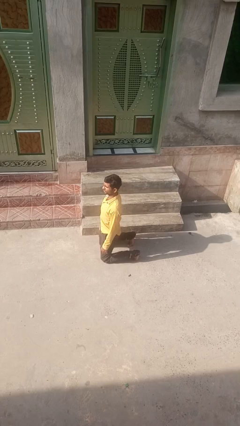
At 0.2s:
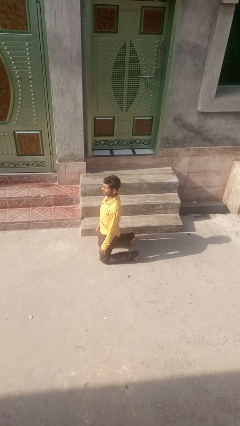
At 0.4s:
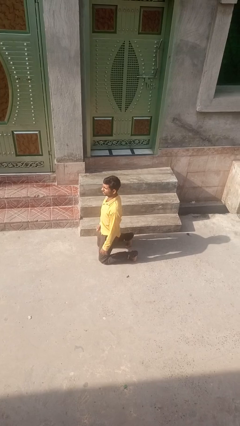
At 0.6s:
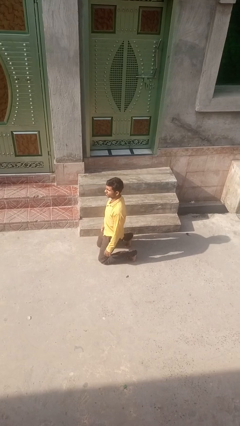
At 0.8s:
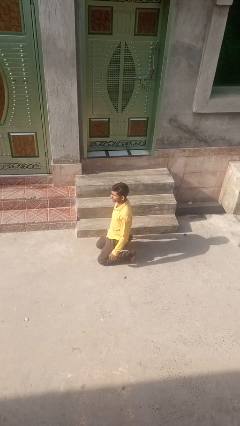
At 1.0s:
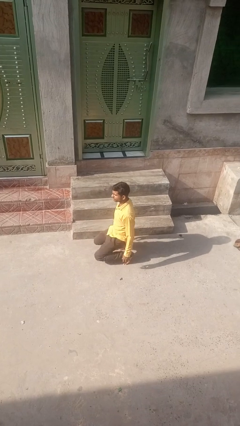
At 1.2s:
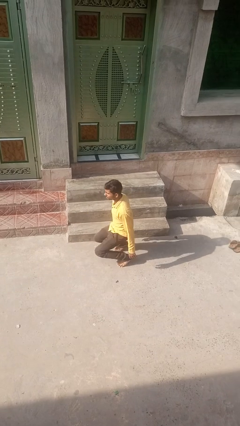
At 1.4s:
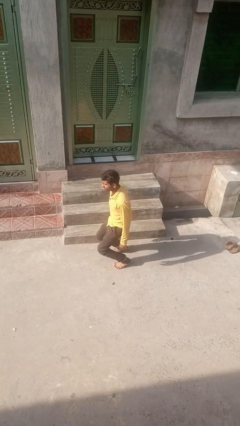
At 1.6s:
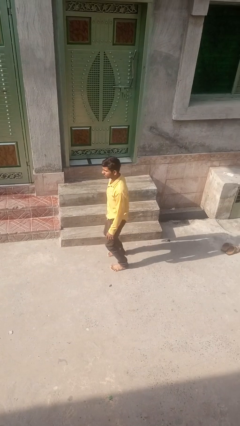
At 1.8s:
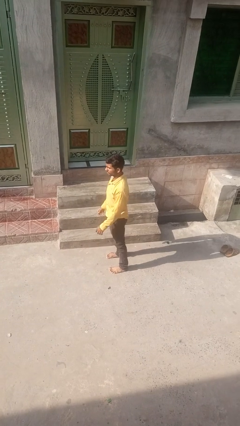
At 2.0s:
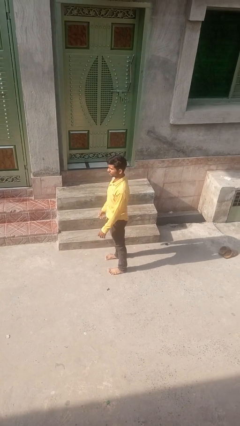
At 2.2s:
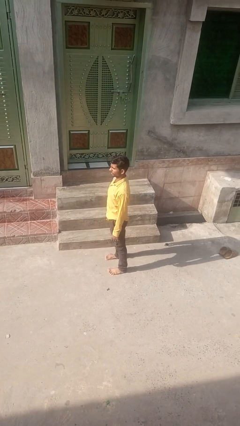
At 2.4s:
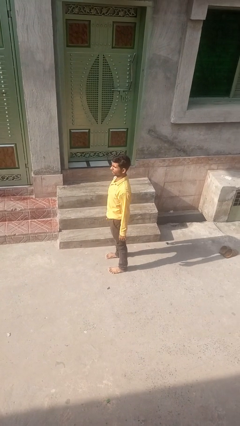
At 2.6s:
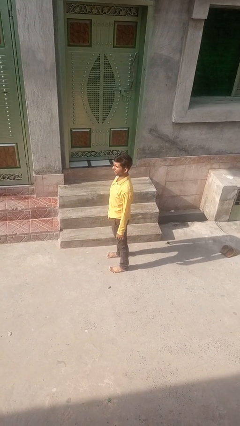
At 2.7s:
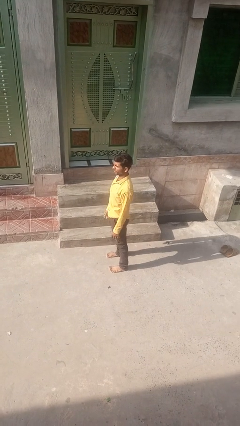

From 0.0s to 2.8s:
person stands up from floor

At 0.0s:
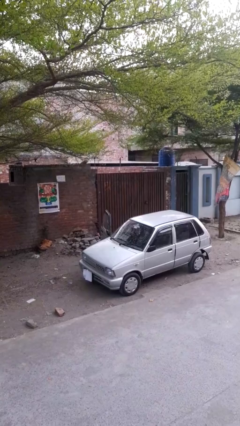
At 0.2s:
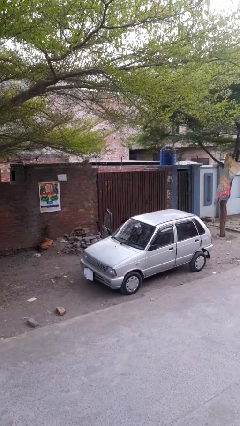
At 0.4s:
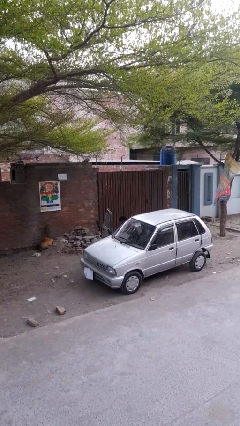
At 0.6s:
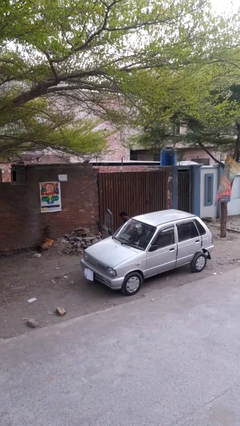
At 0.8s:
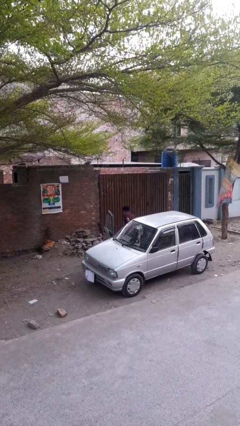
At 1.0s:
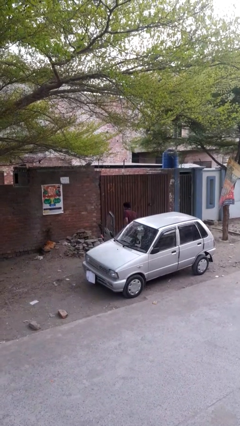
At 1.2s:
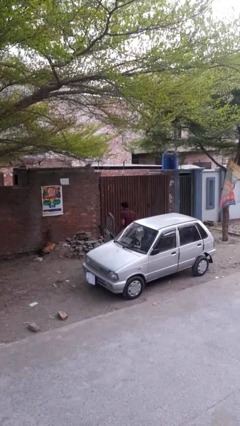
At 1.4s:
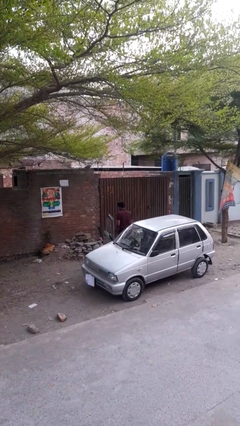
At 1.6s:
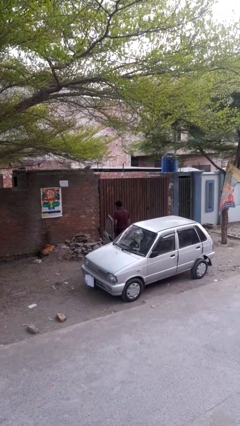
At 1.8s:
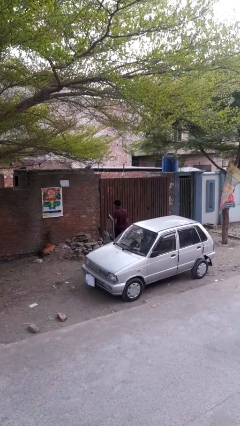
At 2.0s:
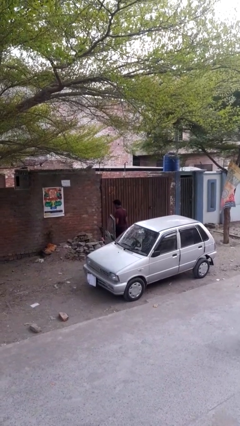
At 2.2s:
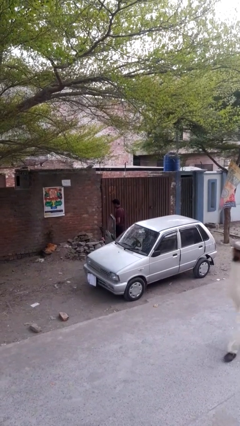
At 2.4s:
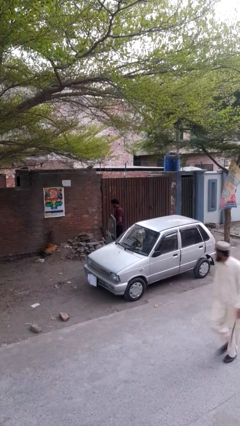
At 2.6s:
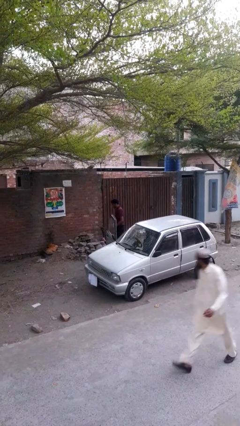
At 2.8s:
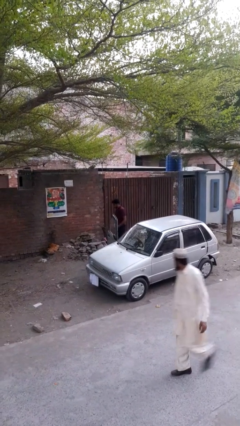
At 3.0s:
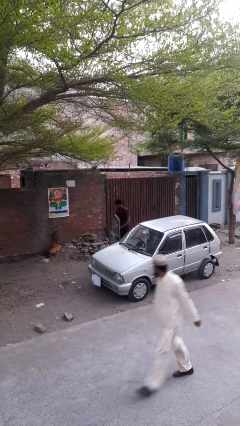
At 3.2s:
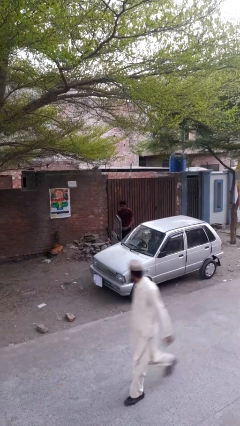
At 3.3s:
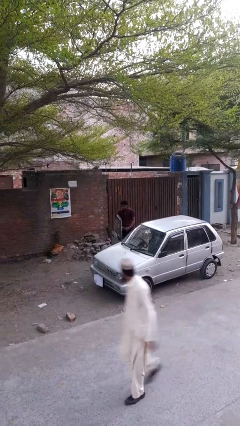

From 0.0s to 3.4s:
person exits car

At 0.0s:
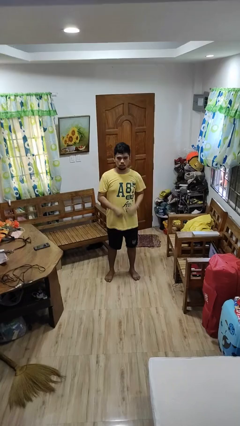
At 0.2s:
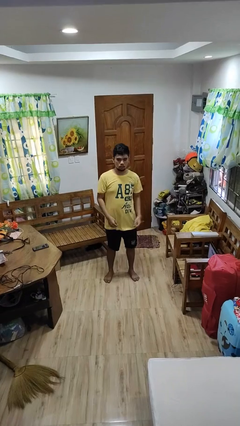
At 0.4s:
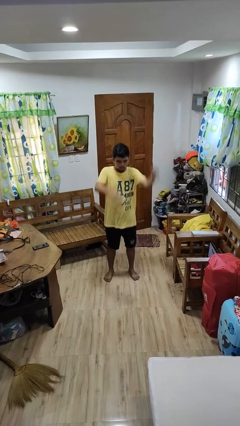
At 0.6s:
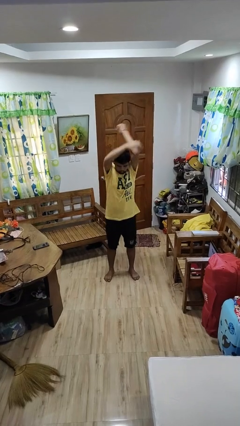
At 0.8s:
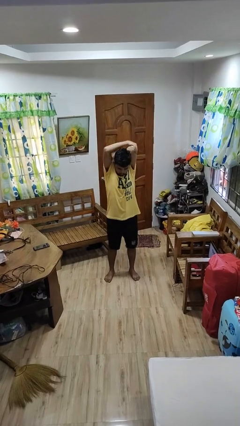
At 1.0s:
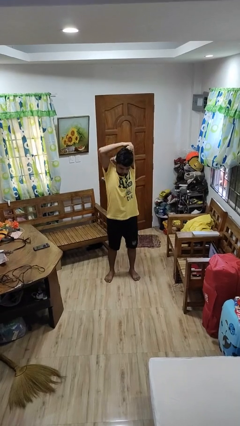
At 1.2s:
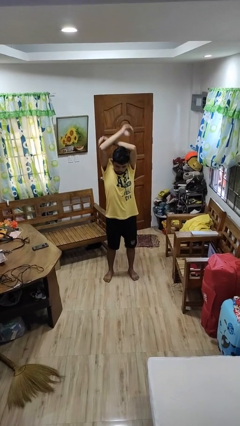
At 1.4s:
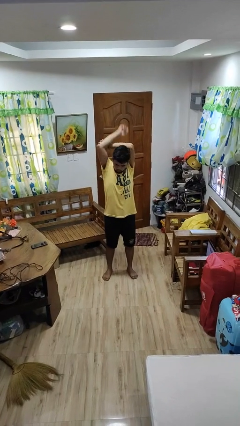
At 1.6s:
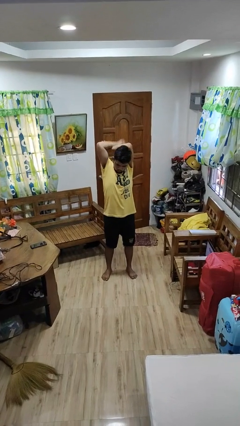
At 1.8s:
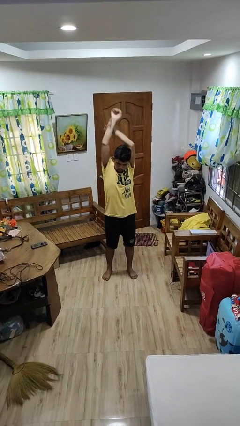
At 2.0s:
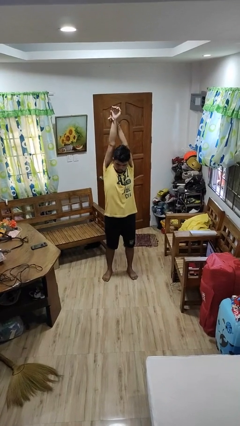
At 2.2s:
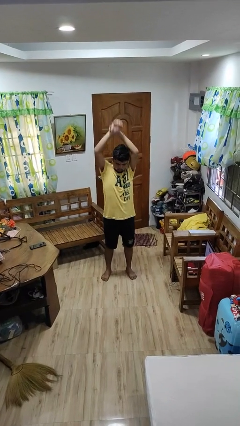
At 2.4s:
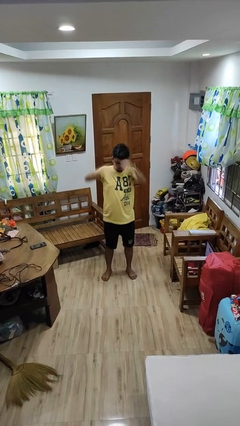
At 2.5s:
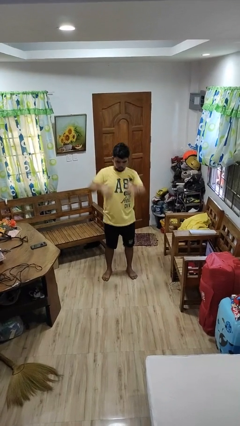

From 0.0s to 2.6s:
person stretches arms over head

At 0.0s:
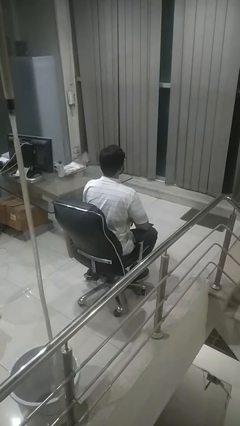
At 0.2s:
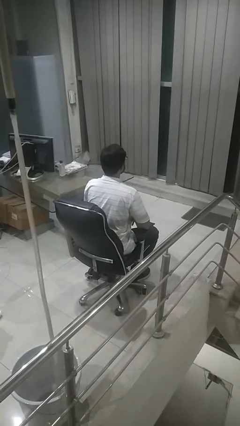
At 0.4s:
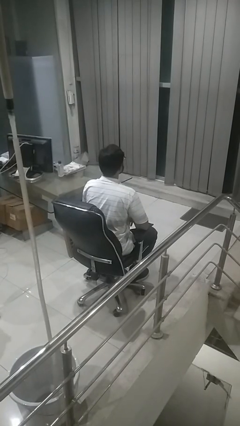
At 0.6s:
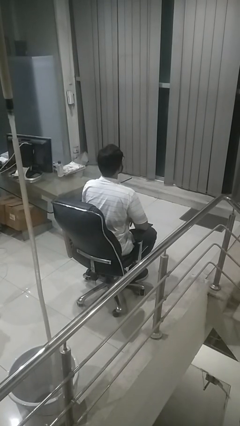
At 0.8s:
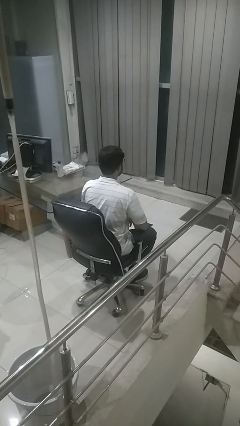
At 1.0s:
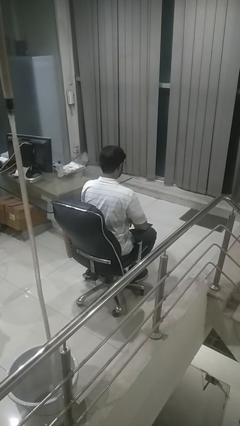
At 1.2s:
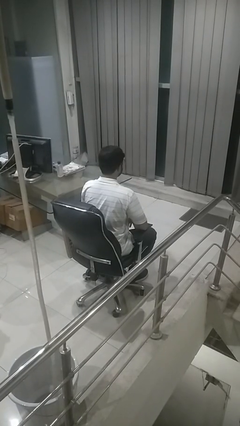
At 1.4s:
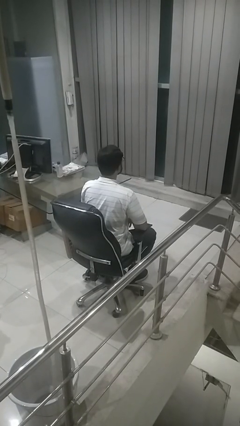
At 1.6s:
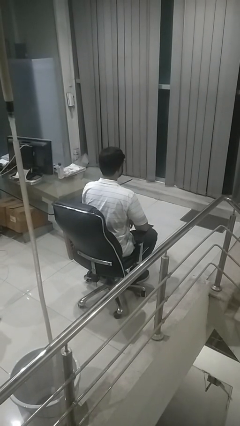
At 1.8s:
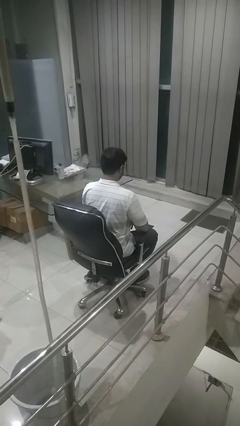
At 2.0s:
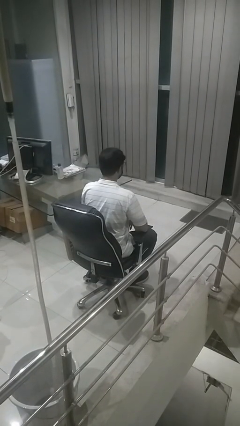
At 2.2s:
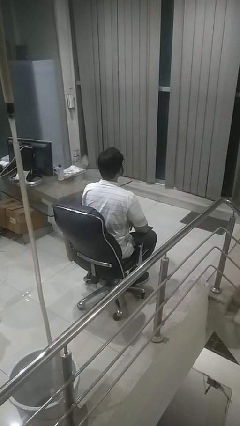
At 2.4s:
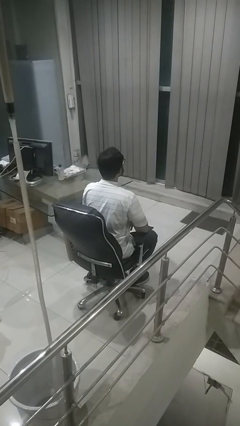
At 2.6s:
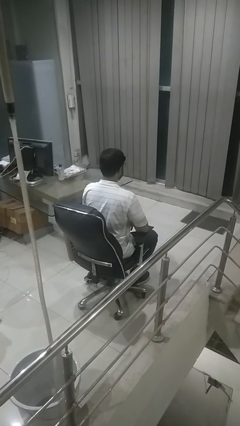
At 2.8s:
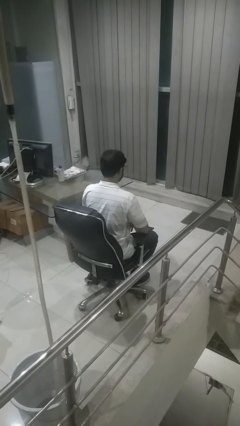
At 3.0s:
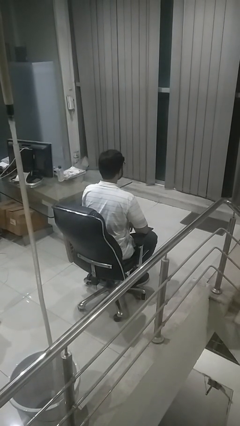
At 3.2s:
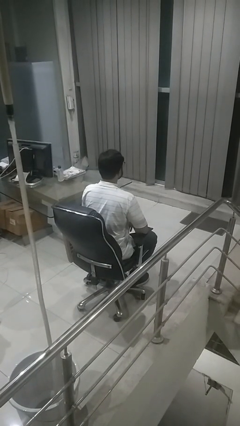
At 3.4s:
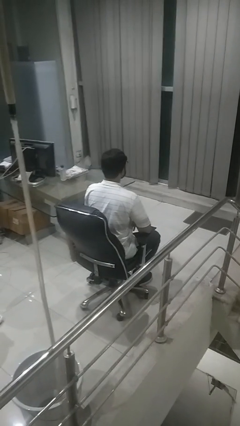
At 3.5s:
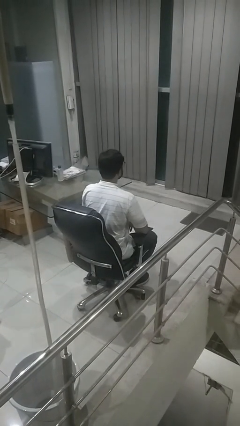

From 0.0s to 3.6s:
person nods head

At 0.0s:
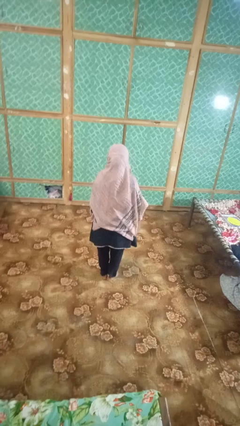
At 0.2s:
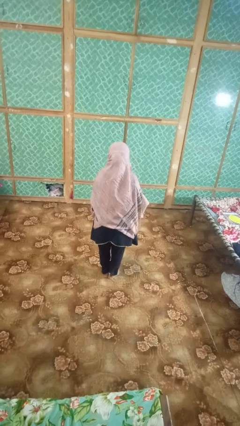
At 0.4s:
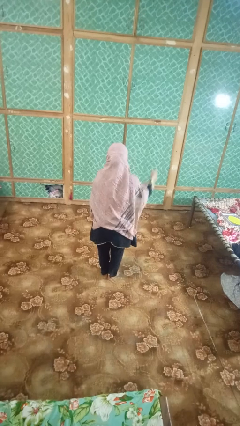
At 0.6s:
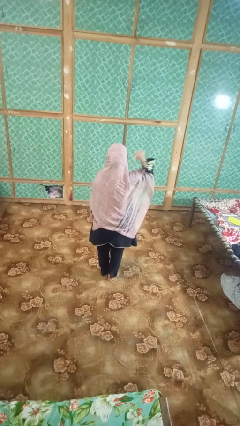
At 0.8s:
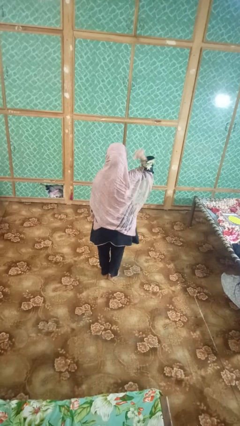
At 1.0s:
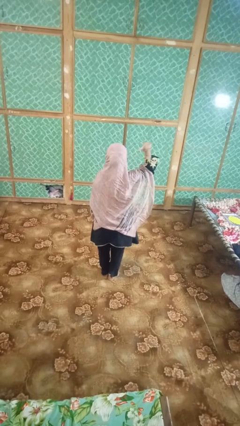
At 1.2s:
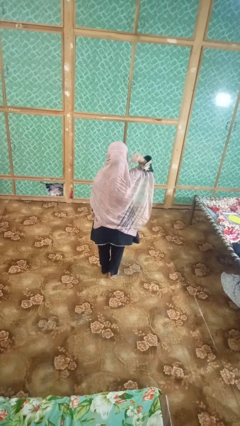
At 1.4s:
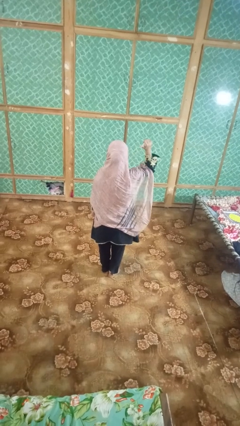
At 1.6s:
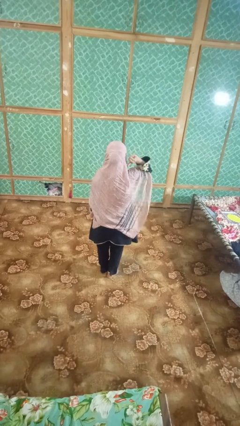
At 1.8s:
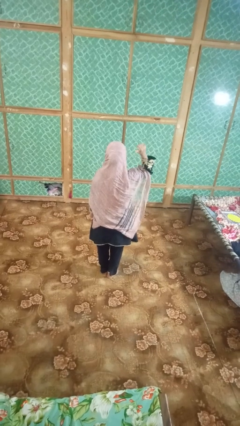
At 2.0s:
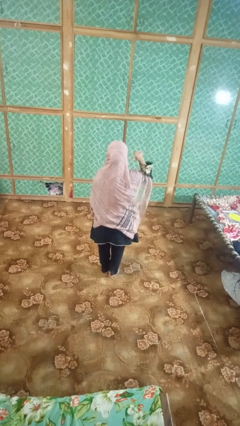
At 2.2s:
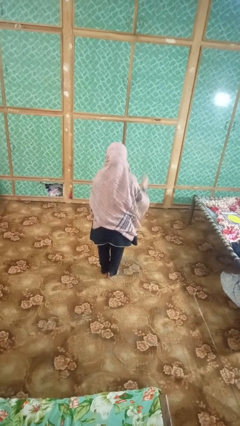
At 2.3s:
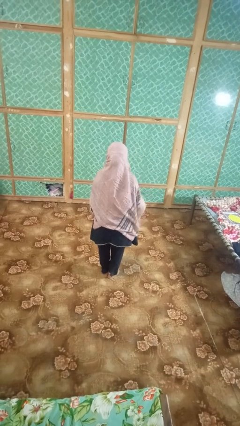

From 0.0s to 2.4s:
person gestures behind me

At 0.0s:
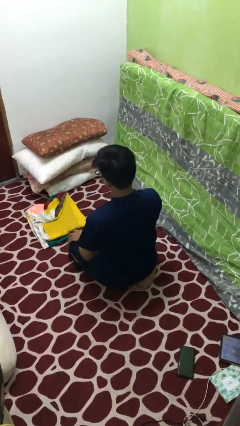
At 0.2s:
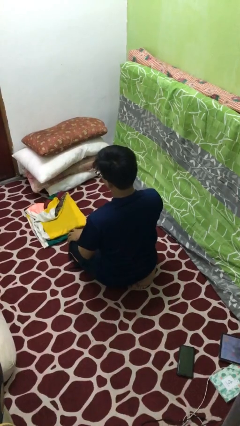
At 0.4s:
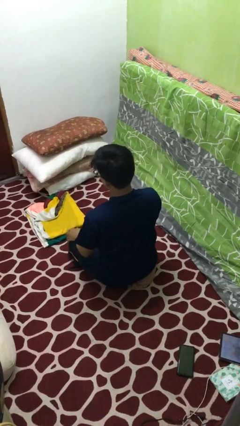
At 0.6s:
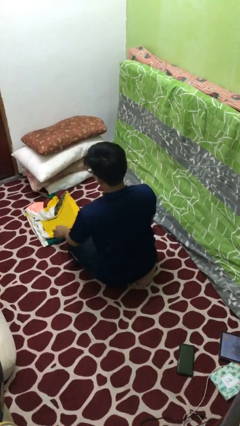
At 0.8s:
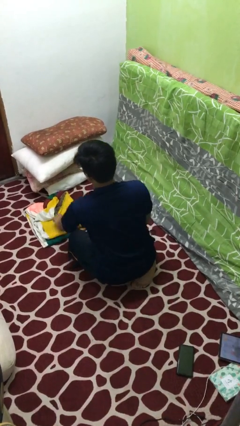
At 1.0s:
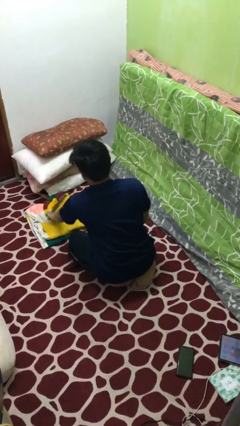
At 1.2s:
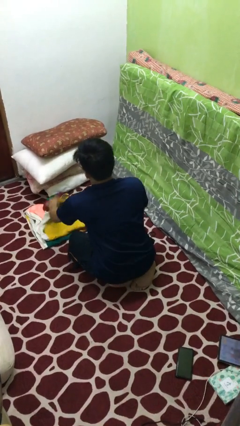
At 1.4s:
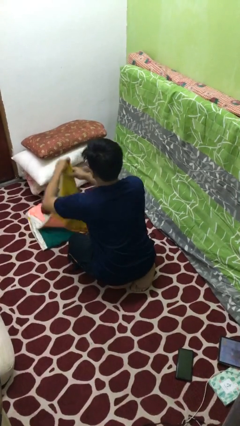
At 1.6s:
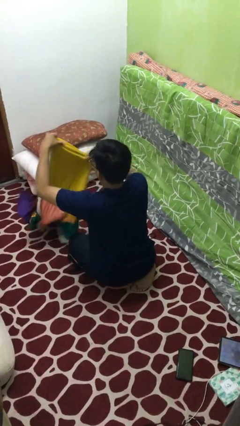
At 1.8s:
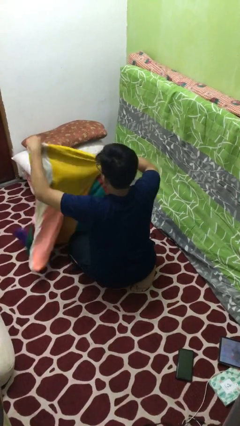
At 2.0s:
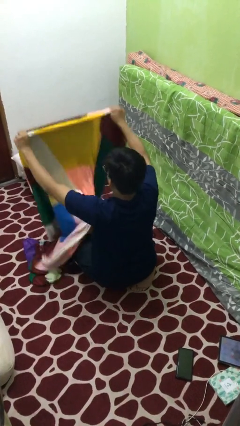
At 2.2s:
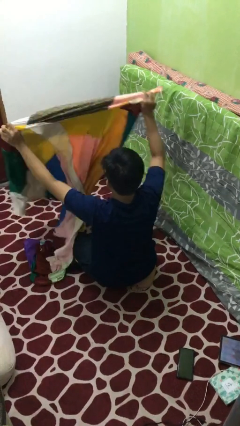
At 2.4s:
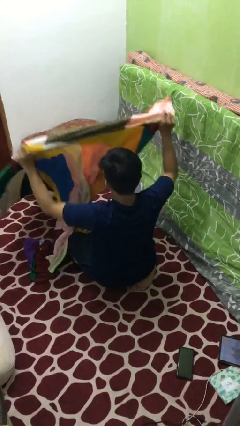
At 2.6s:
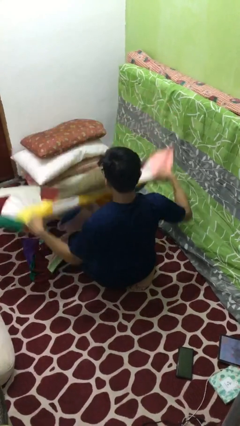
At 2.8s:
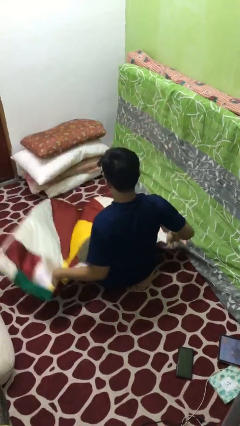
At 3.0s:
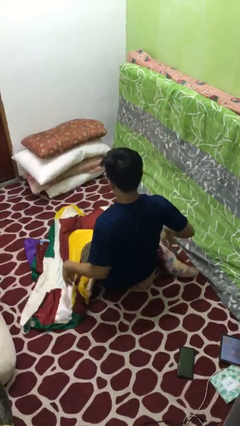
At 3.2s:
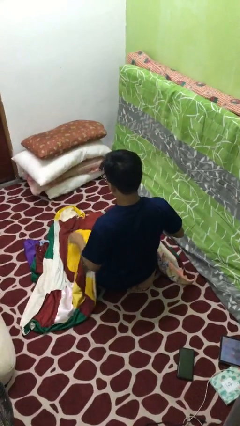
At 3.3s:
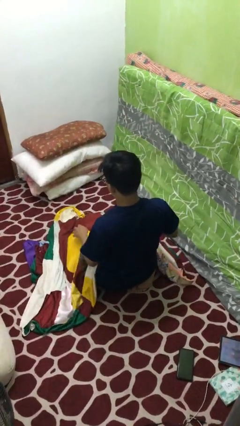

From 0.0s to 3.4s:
person unfolds blanket
